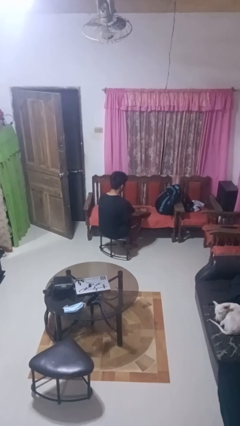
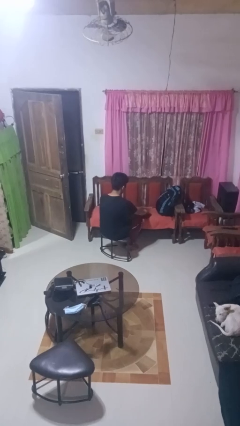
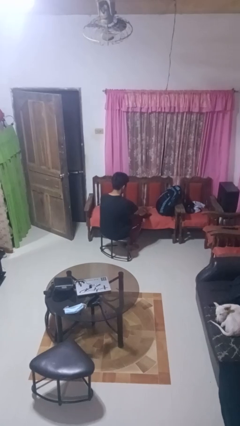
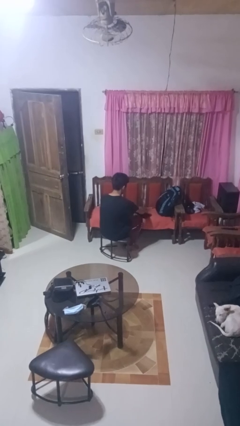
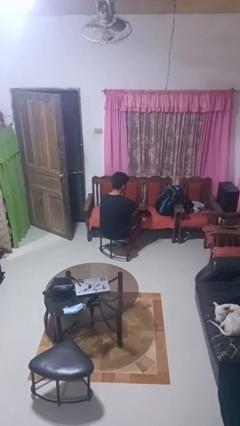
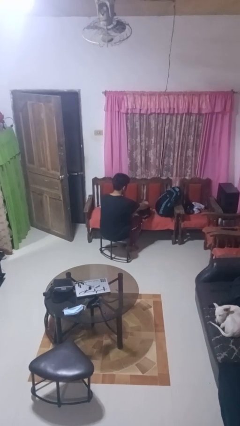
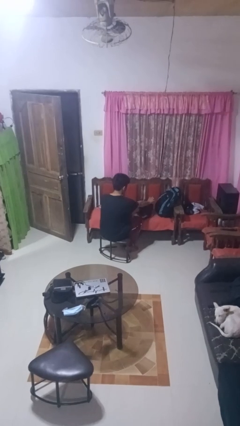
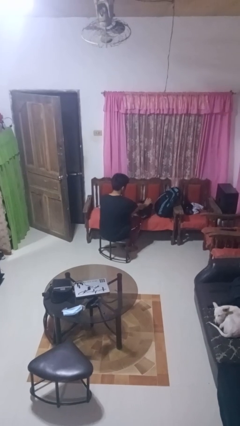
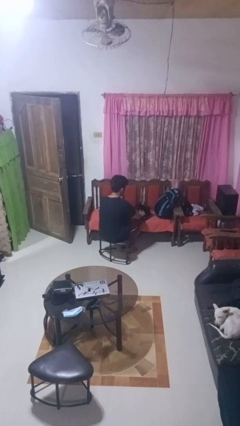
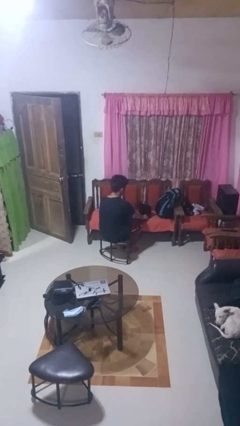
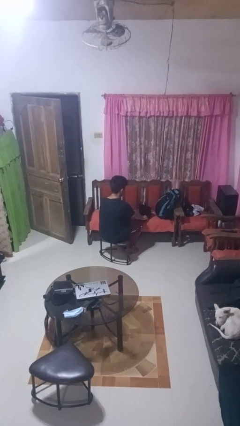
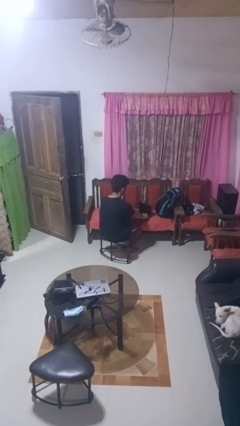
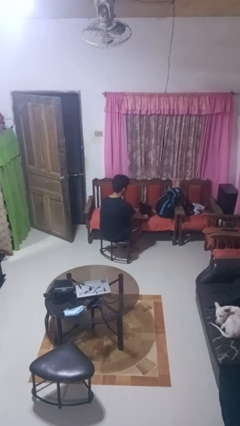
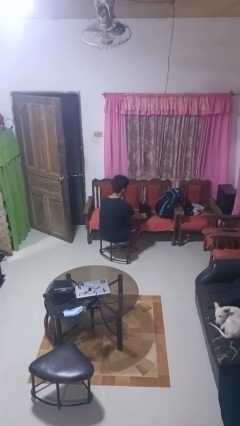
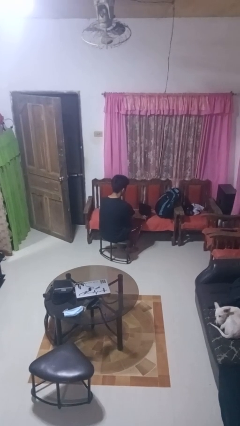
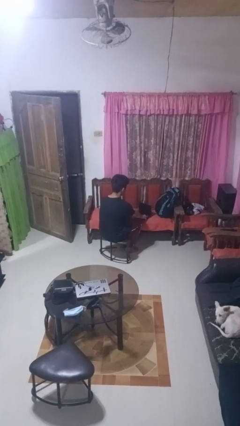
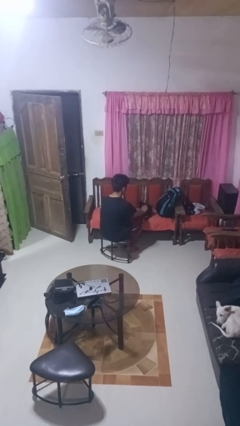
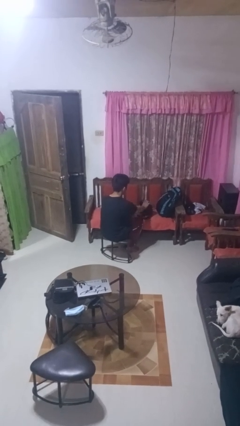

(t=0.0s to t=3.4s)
person opens laptop

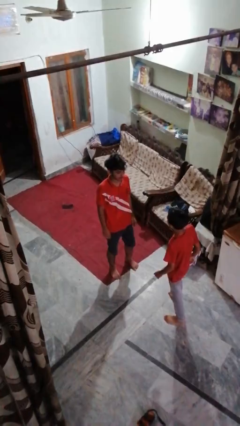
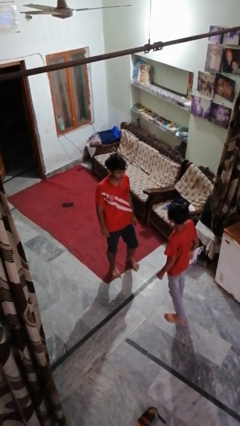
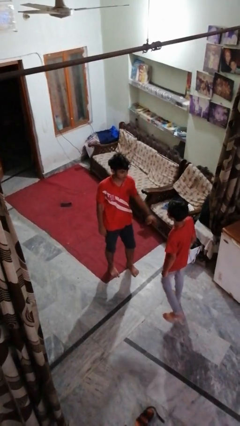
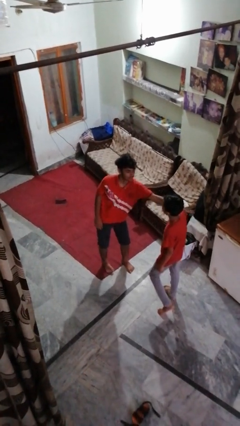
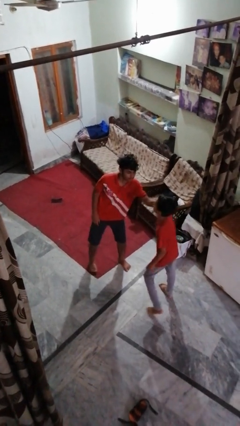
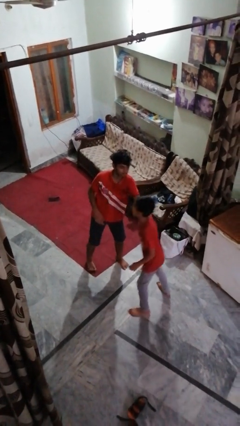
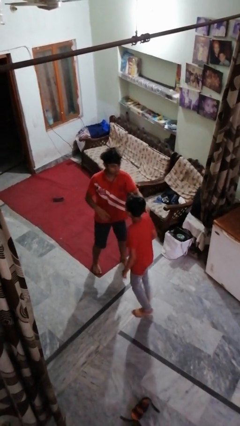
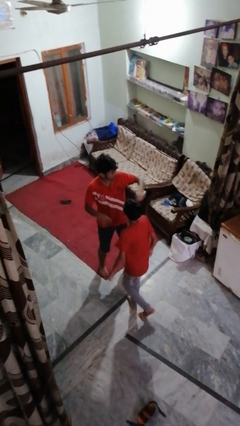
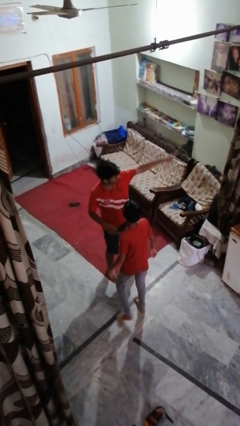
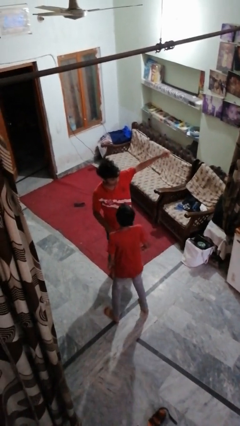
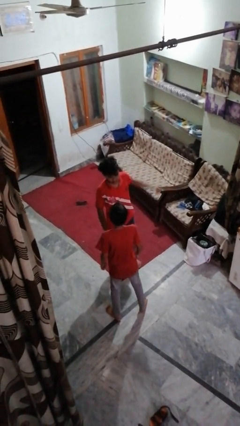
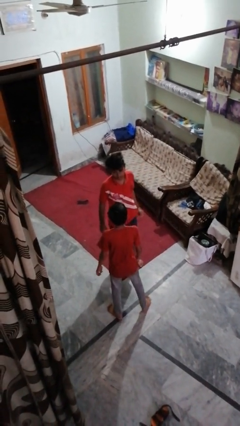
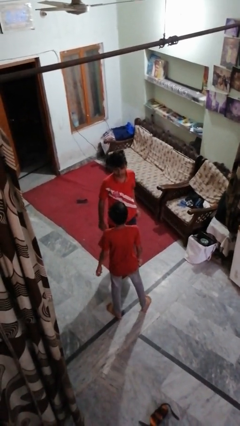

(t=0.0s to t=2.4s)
person shoves person

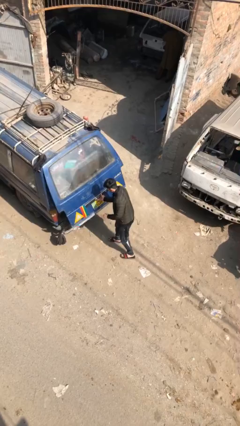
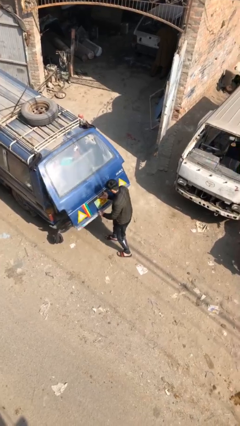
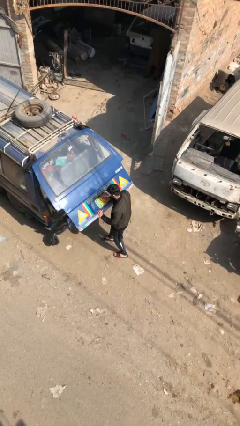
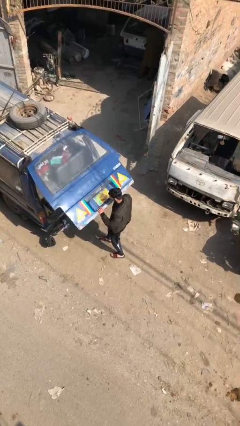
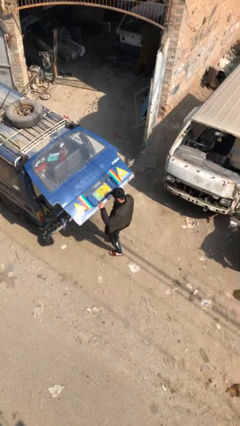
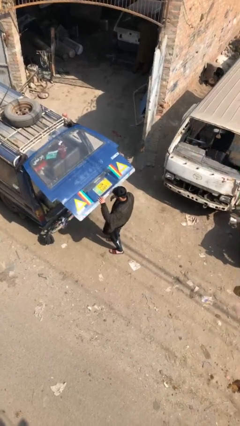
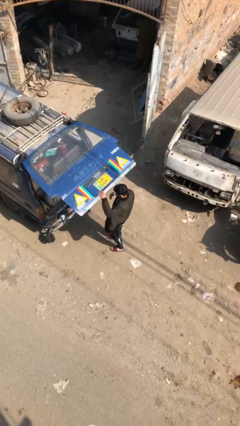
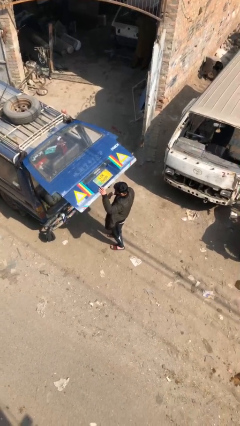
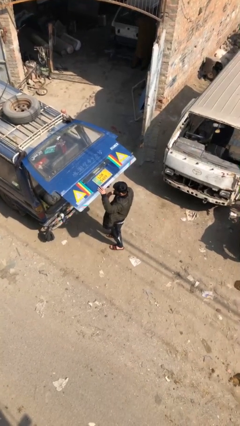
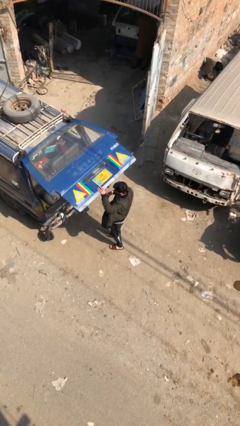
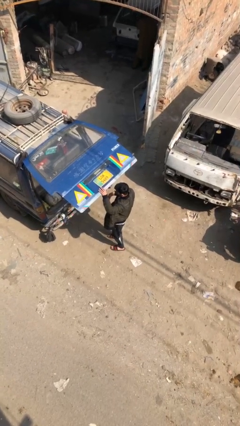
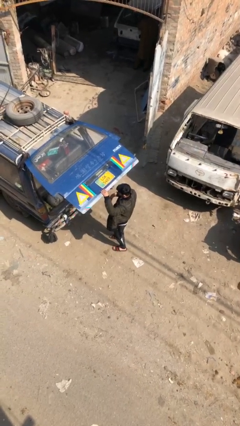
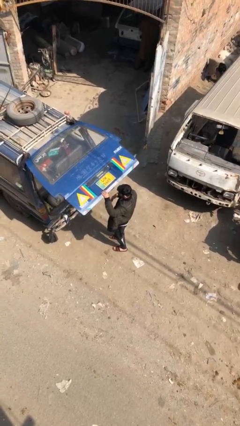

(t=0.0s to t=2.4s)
person opens car trunk

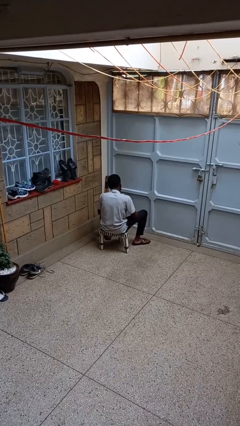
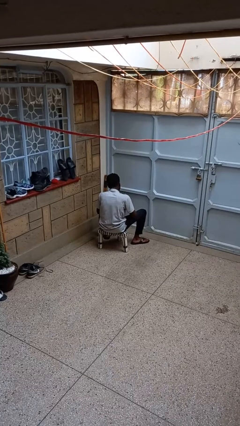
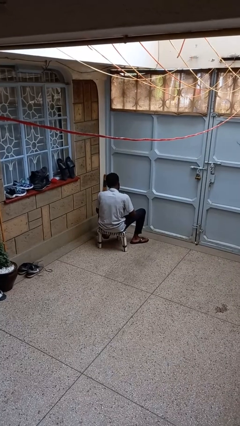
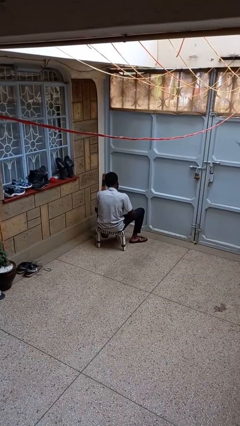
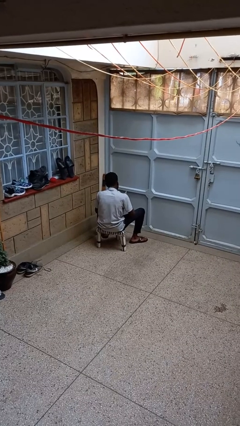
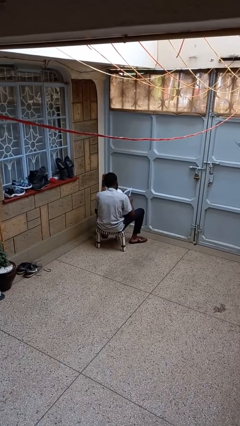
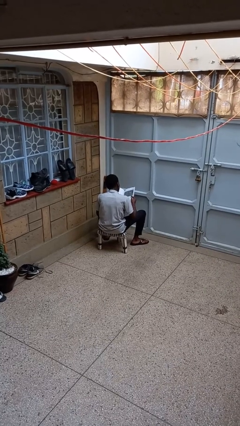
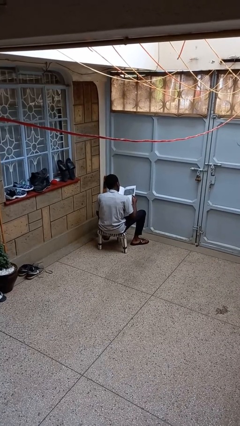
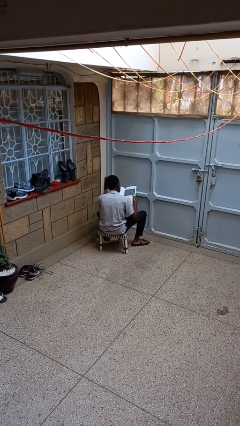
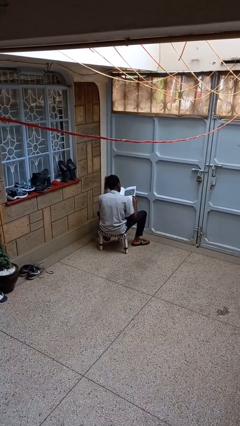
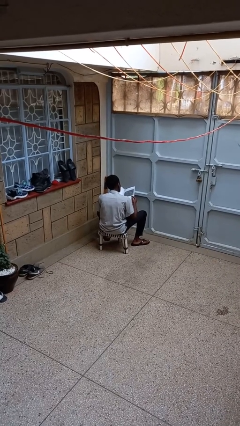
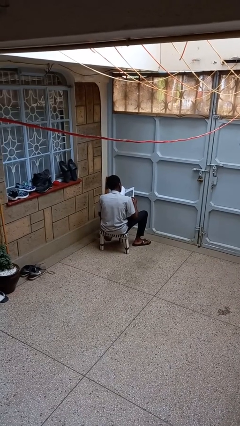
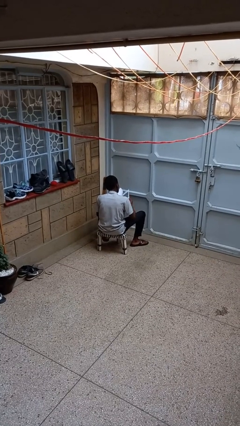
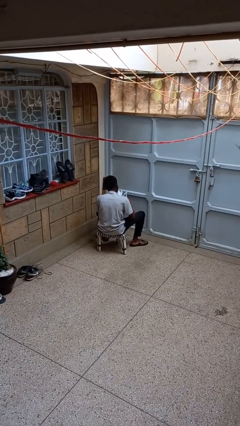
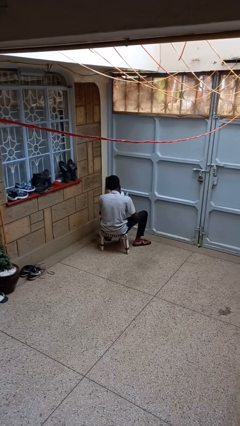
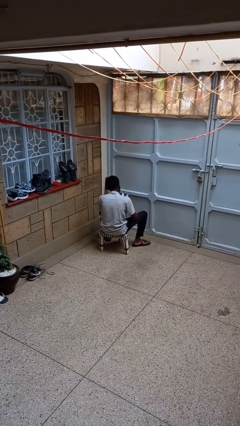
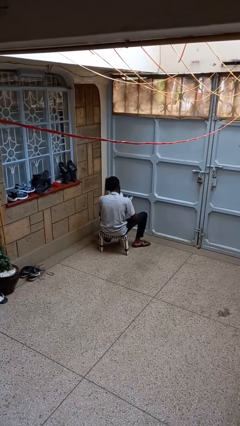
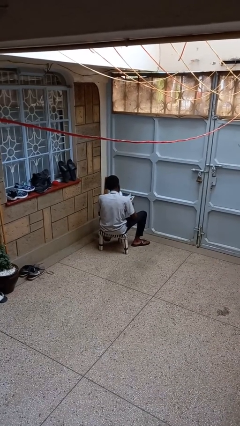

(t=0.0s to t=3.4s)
person reads magazine

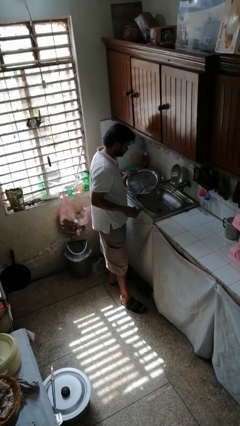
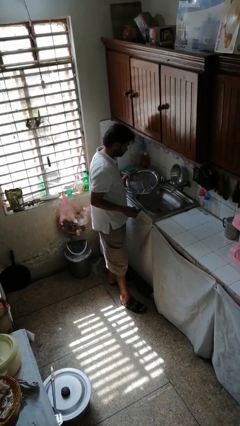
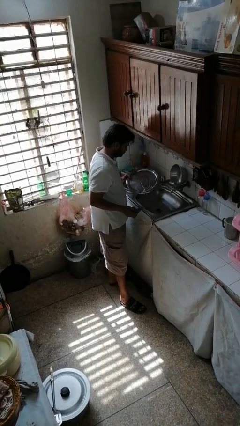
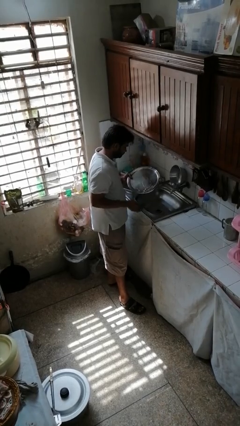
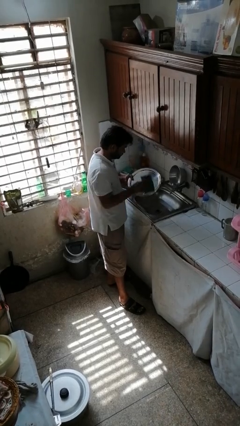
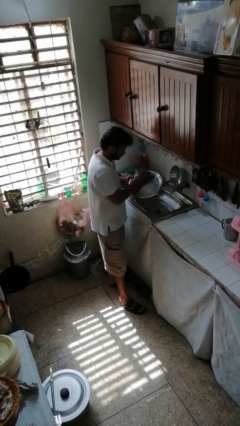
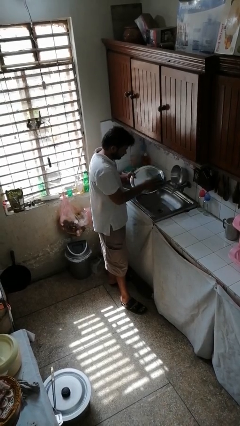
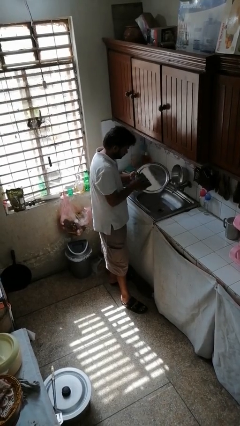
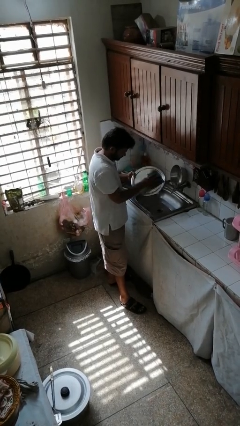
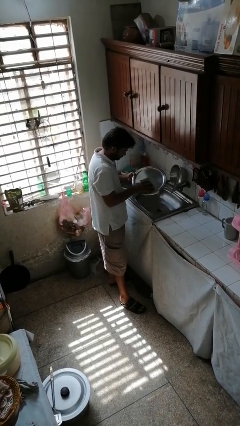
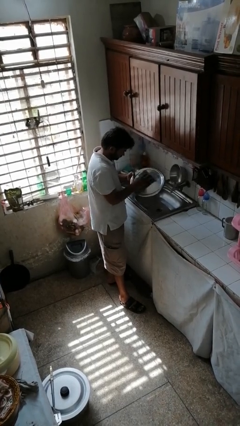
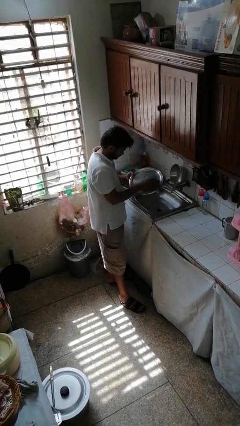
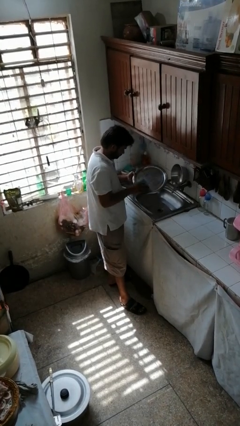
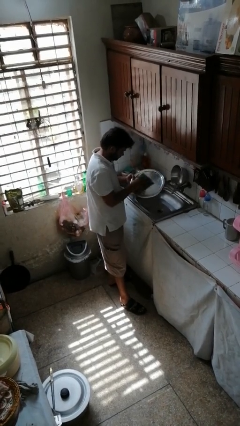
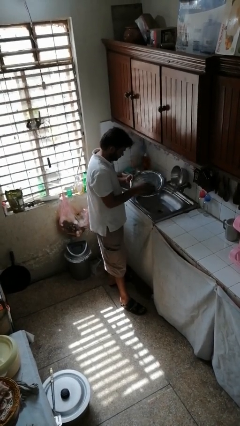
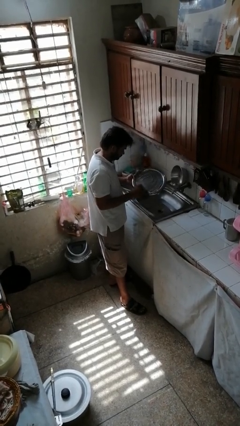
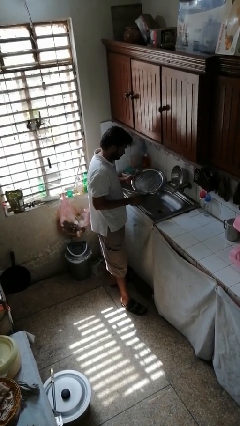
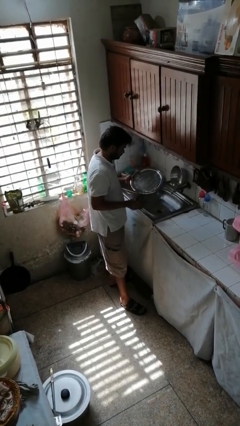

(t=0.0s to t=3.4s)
person washes dish

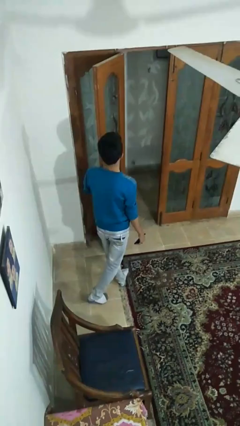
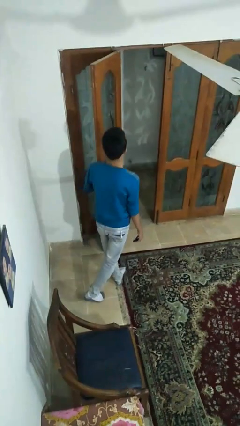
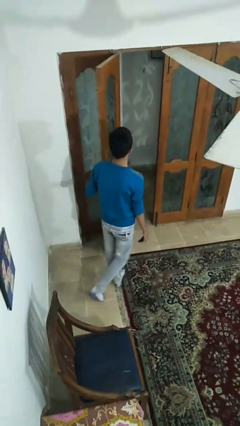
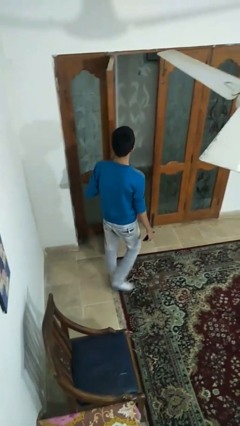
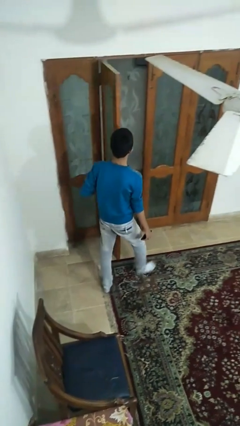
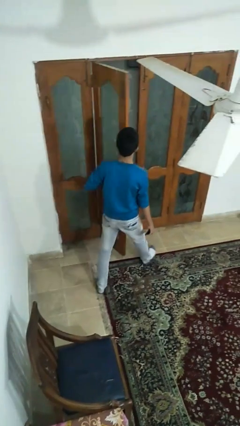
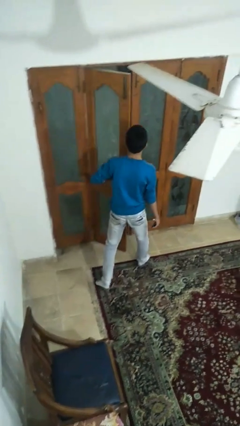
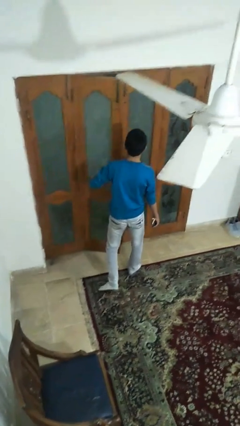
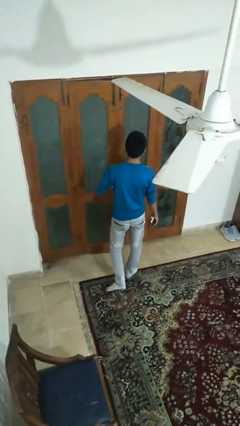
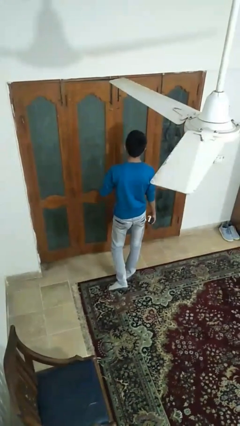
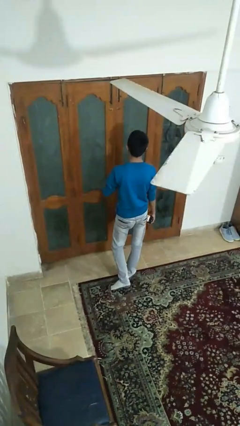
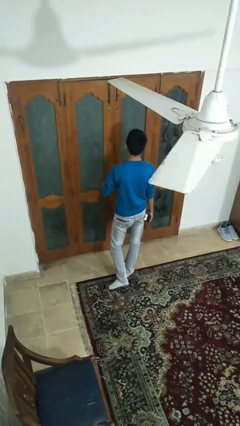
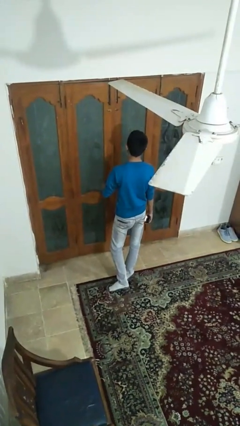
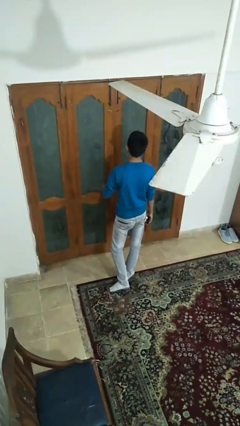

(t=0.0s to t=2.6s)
person closes facility door
